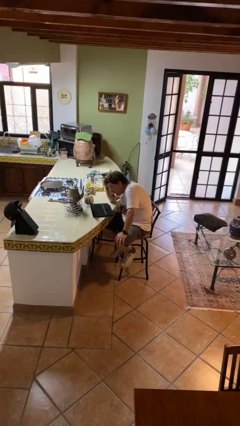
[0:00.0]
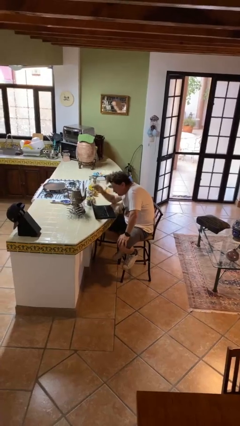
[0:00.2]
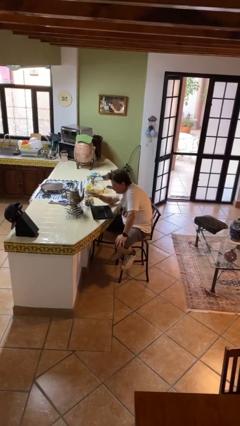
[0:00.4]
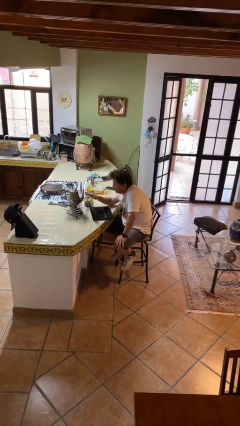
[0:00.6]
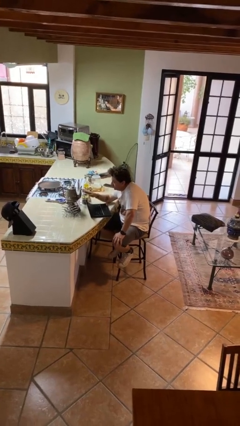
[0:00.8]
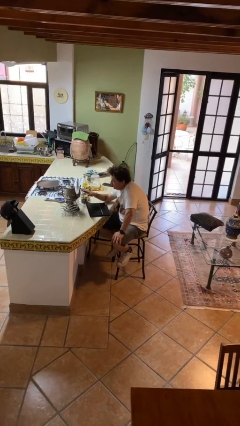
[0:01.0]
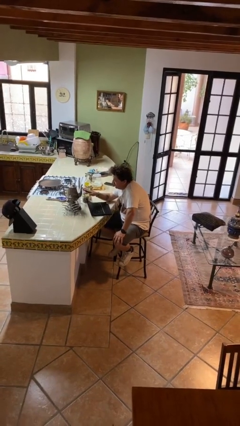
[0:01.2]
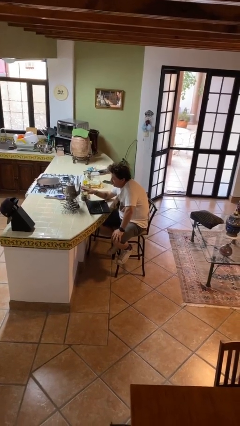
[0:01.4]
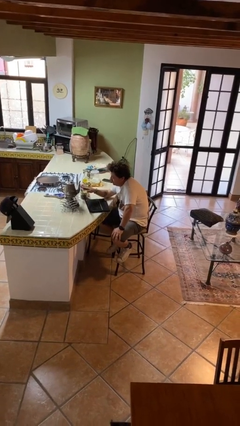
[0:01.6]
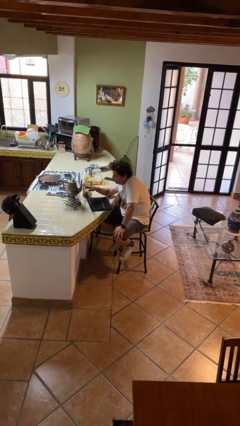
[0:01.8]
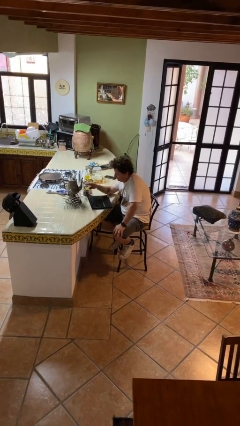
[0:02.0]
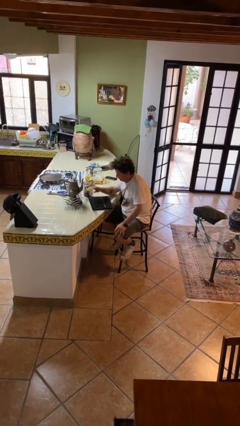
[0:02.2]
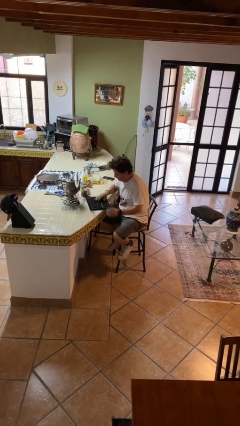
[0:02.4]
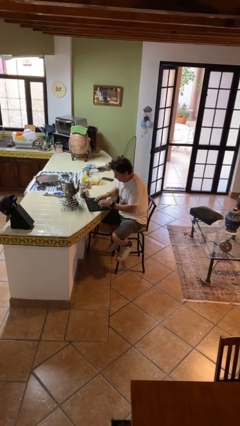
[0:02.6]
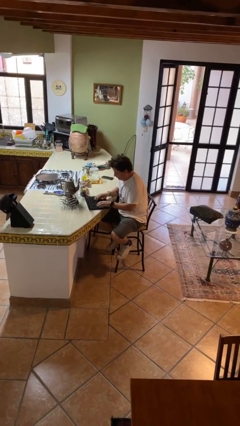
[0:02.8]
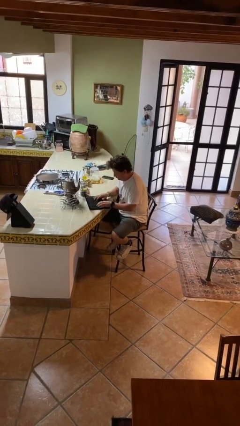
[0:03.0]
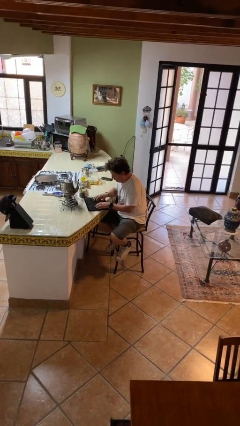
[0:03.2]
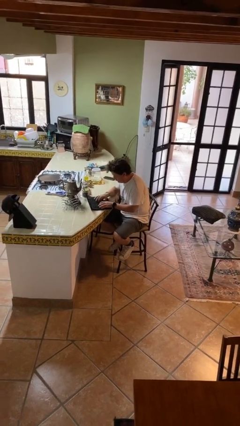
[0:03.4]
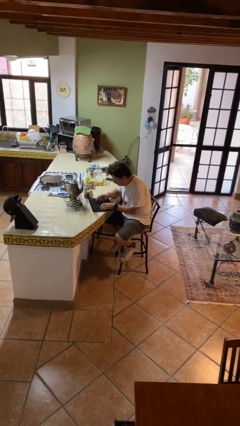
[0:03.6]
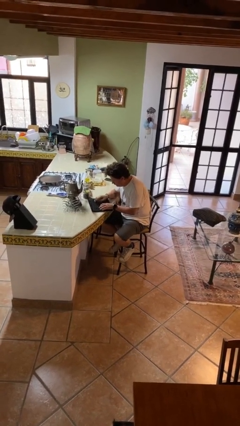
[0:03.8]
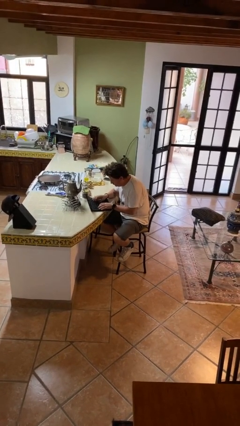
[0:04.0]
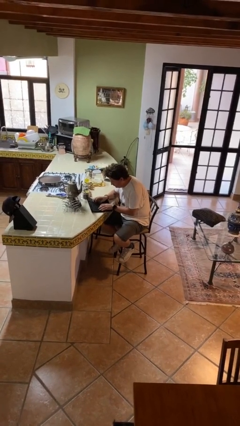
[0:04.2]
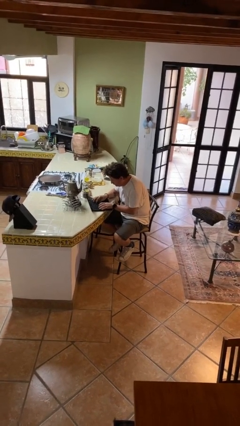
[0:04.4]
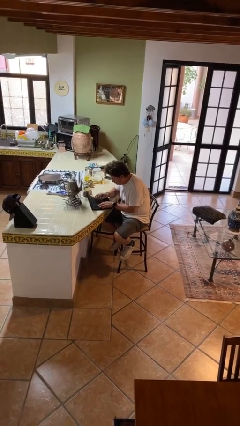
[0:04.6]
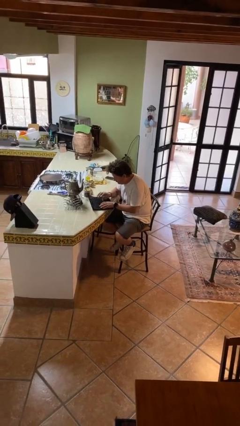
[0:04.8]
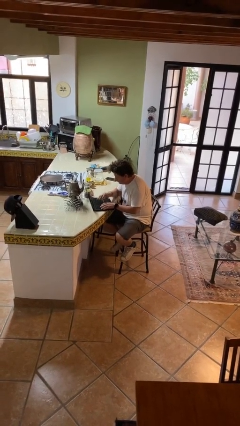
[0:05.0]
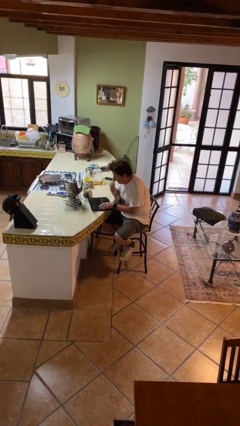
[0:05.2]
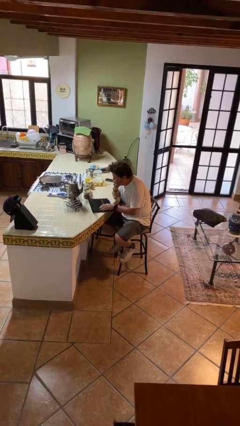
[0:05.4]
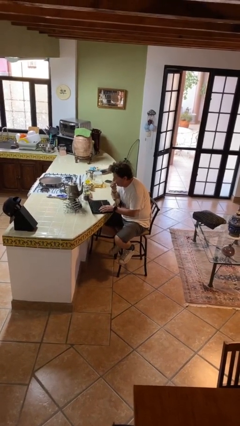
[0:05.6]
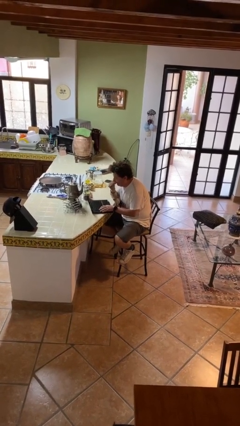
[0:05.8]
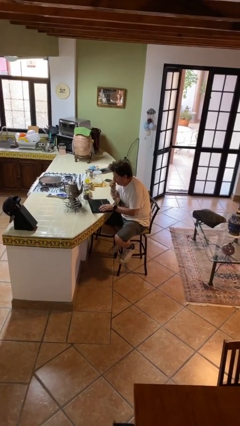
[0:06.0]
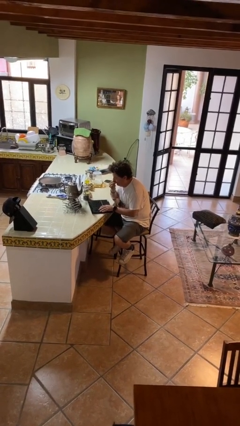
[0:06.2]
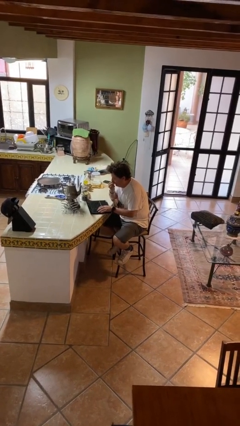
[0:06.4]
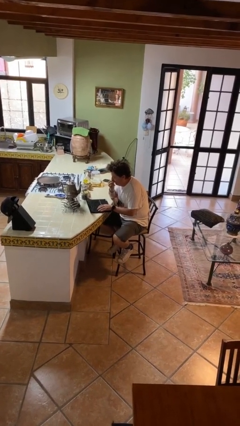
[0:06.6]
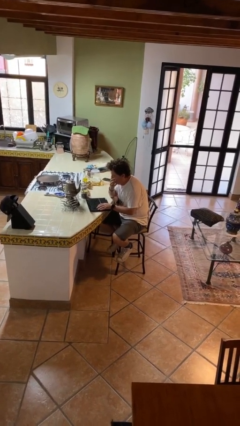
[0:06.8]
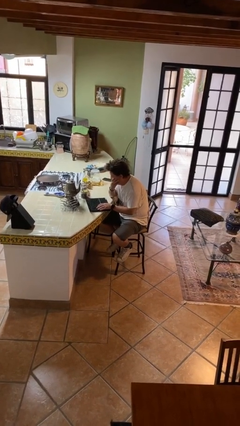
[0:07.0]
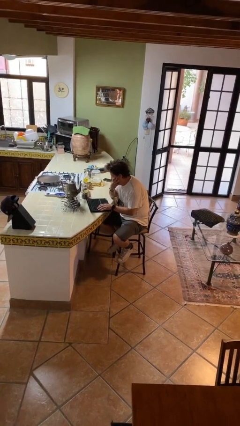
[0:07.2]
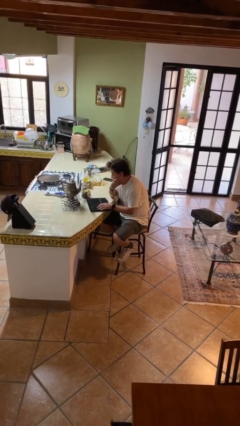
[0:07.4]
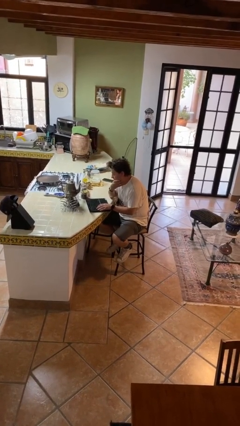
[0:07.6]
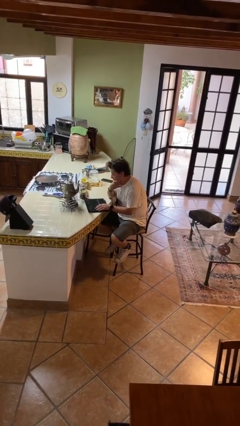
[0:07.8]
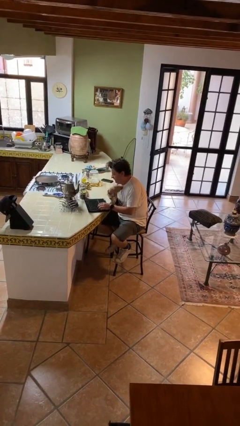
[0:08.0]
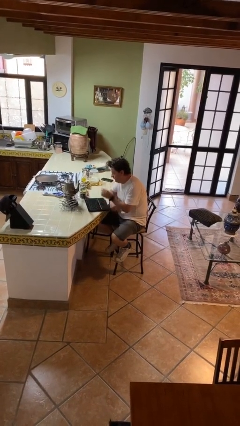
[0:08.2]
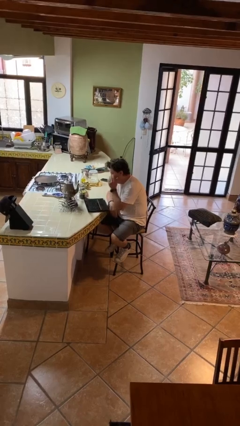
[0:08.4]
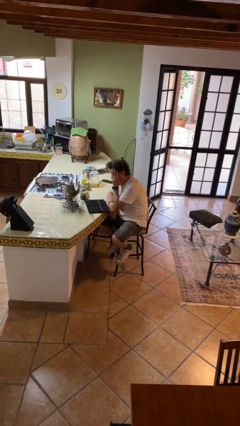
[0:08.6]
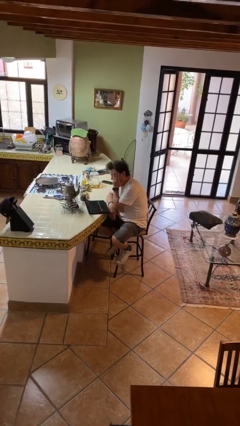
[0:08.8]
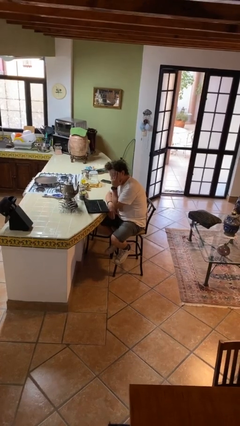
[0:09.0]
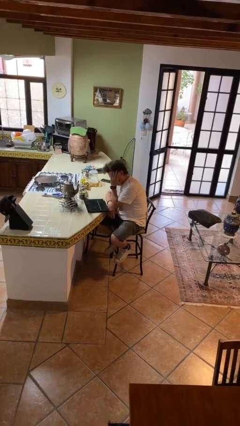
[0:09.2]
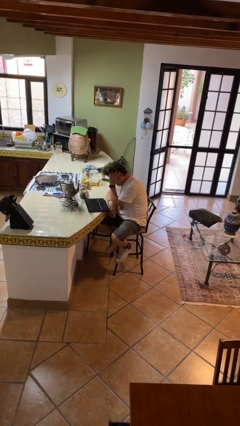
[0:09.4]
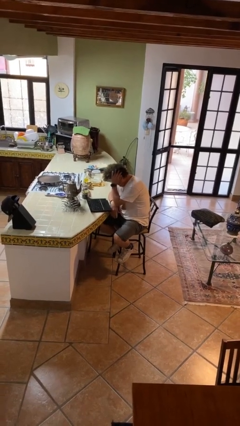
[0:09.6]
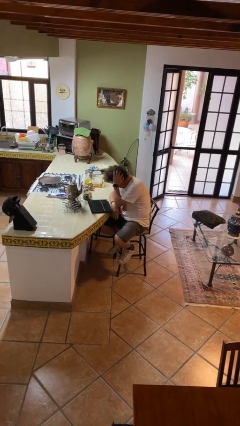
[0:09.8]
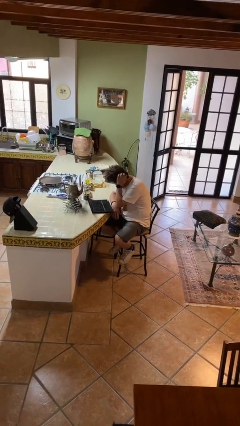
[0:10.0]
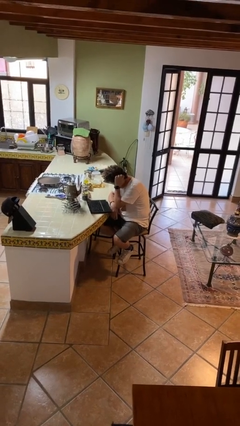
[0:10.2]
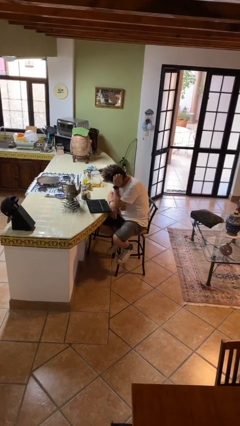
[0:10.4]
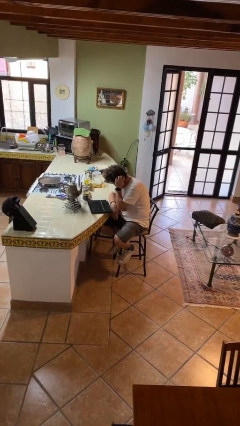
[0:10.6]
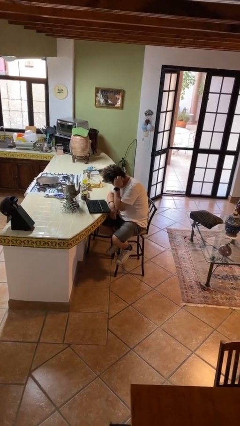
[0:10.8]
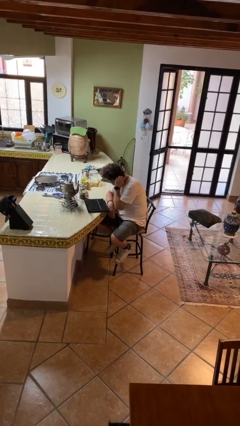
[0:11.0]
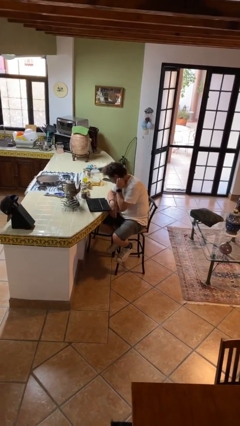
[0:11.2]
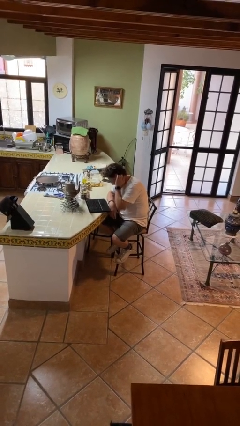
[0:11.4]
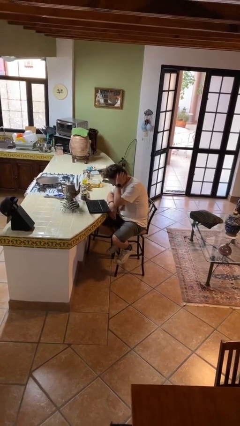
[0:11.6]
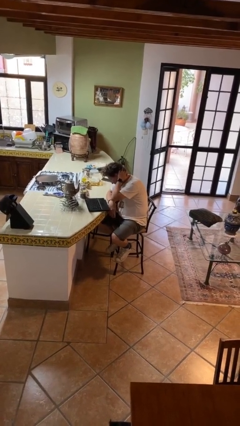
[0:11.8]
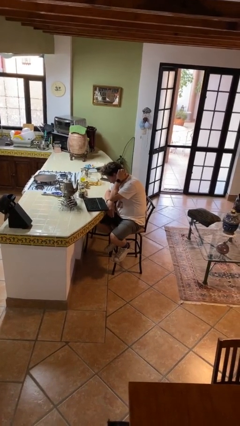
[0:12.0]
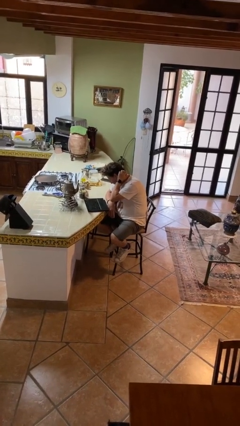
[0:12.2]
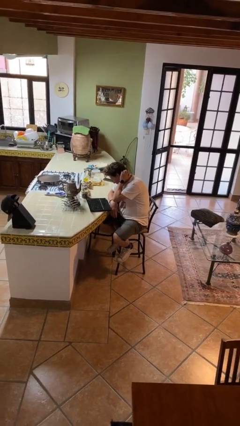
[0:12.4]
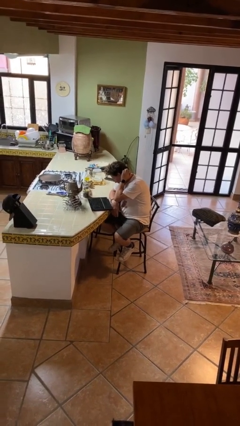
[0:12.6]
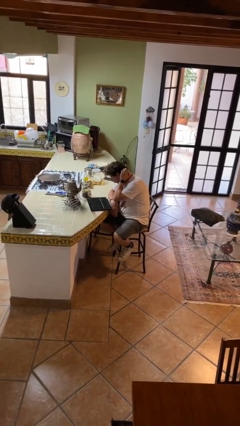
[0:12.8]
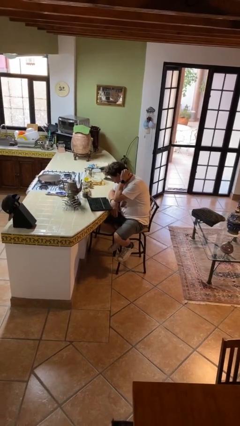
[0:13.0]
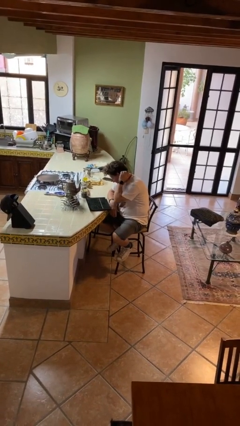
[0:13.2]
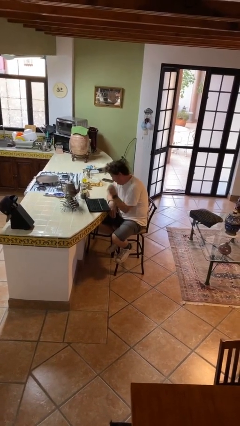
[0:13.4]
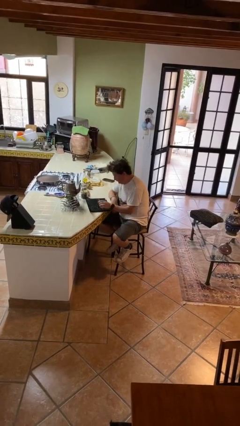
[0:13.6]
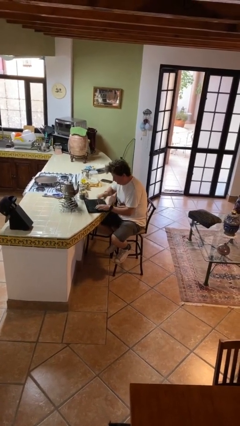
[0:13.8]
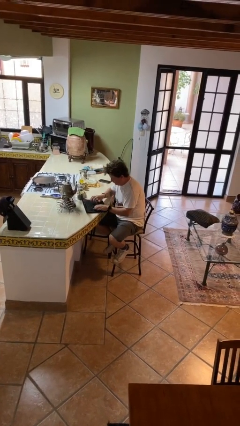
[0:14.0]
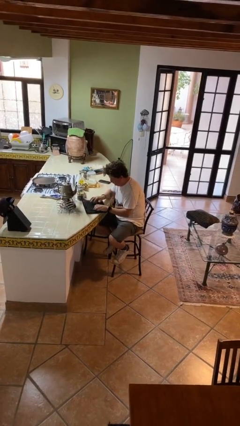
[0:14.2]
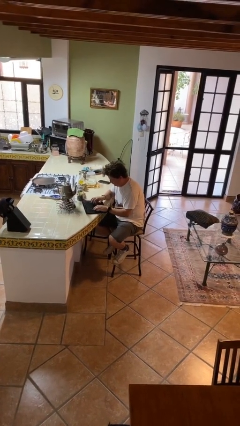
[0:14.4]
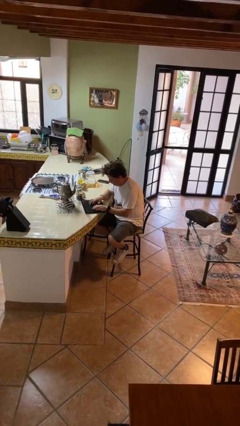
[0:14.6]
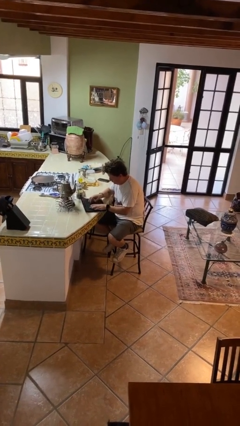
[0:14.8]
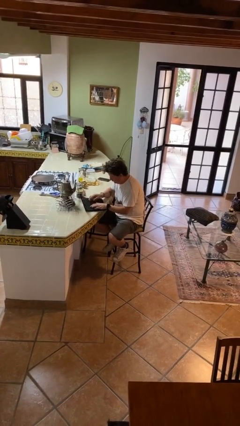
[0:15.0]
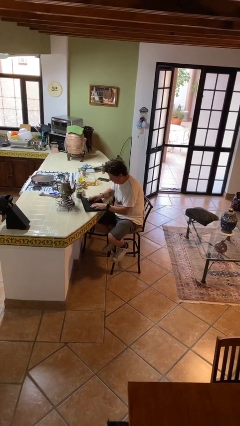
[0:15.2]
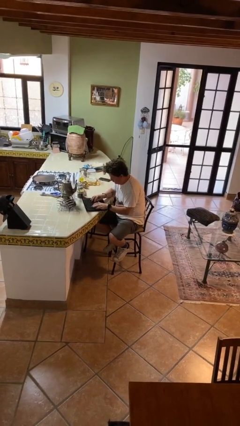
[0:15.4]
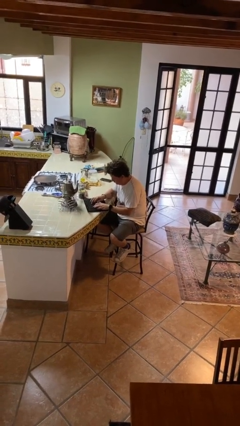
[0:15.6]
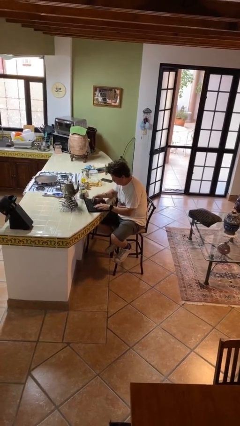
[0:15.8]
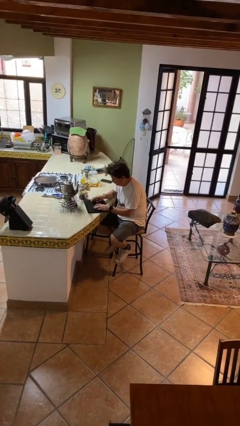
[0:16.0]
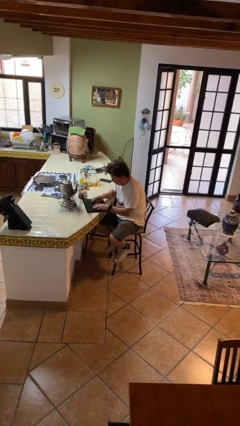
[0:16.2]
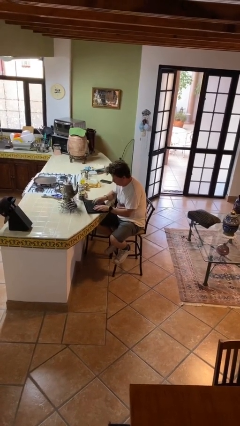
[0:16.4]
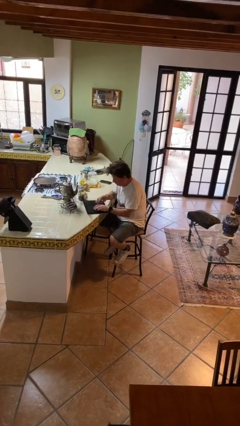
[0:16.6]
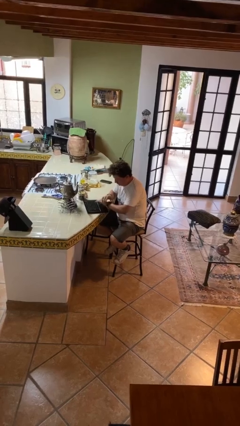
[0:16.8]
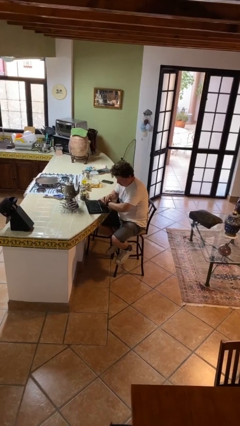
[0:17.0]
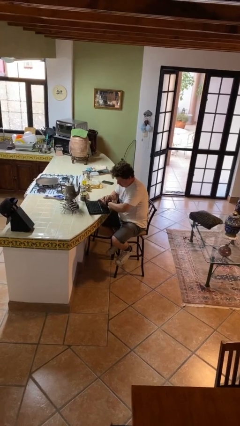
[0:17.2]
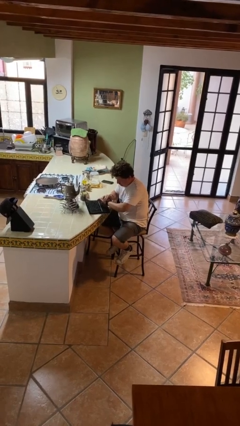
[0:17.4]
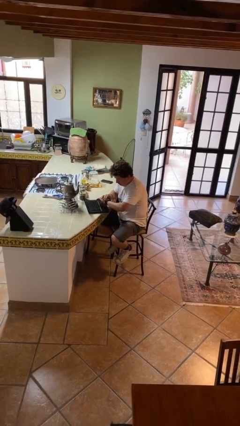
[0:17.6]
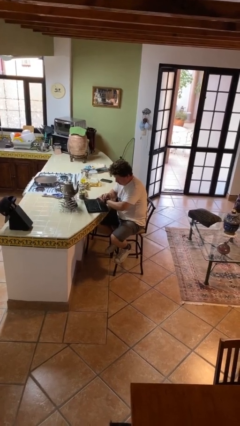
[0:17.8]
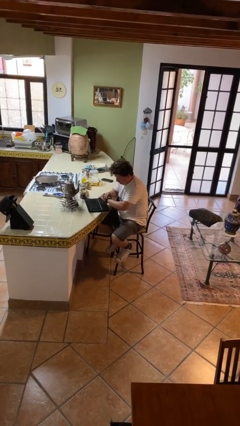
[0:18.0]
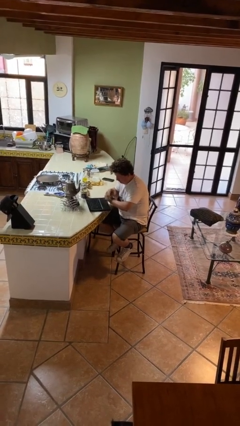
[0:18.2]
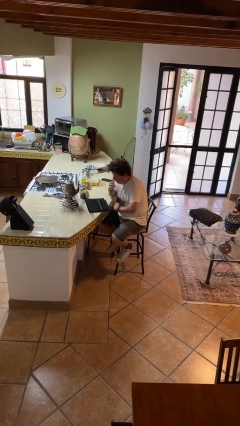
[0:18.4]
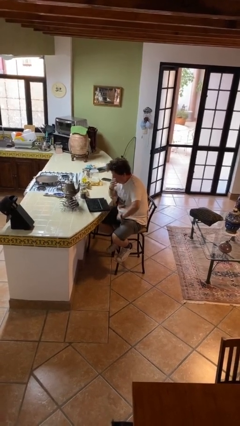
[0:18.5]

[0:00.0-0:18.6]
person interacts with laptop
